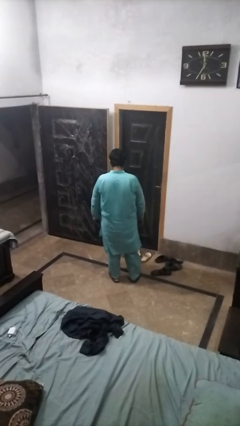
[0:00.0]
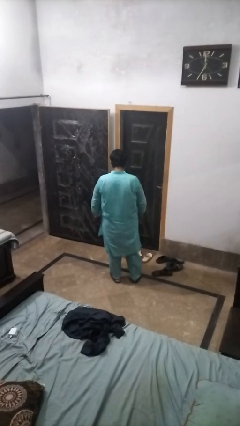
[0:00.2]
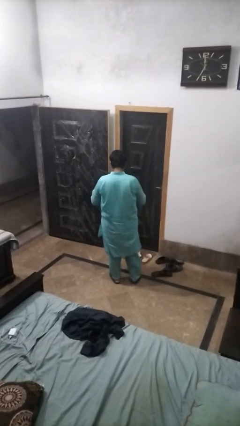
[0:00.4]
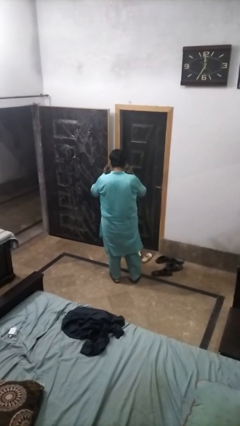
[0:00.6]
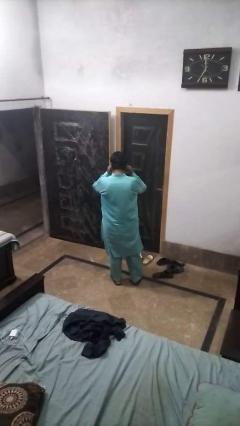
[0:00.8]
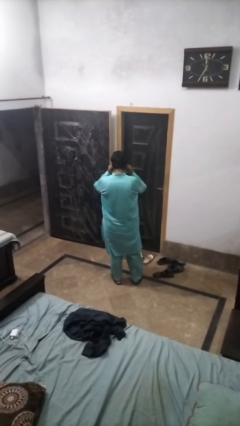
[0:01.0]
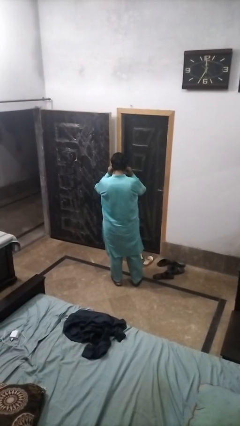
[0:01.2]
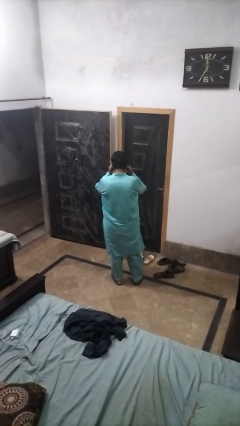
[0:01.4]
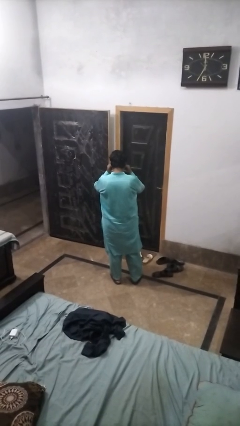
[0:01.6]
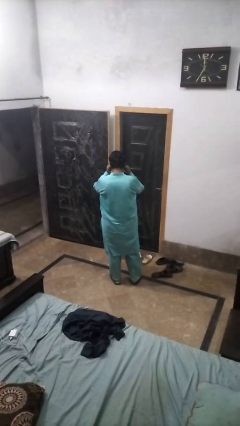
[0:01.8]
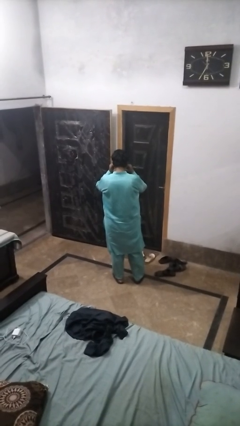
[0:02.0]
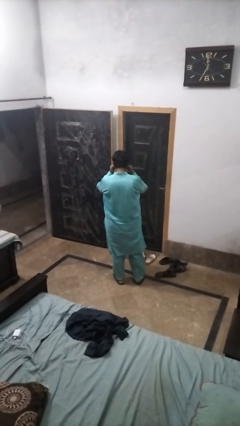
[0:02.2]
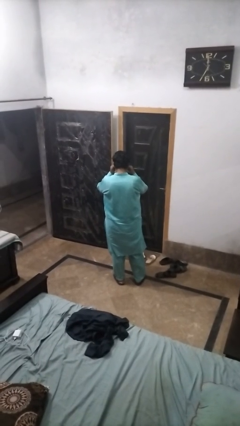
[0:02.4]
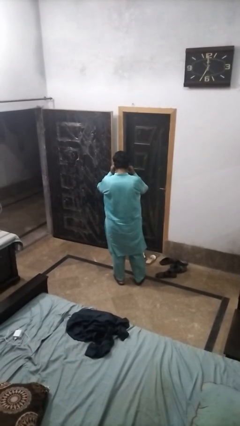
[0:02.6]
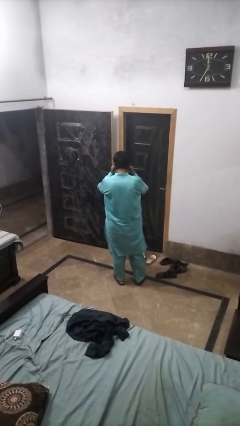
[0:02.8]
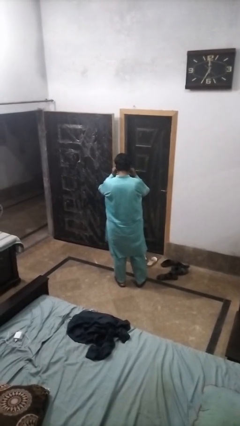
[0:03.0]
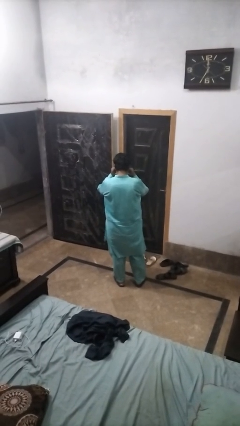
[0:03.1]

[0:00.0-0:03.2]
person puts fingers in ear

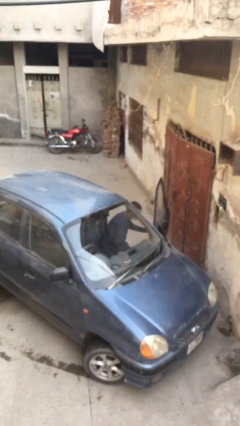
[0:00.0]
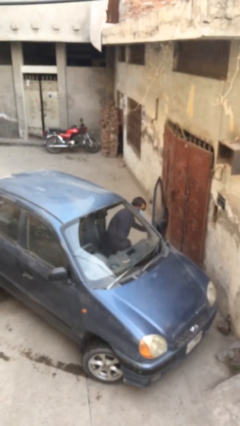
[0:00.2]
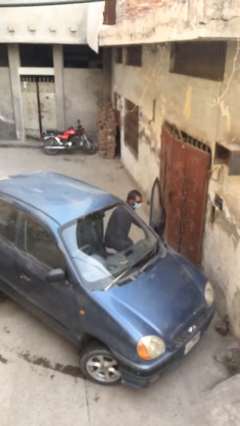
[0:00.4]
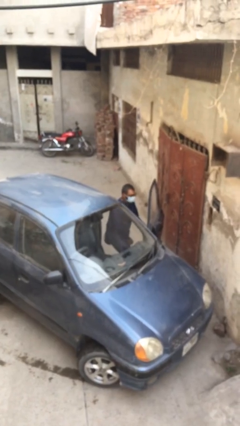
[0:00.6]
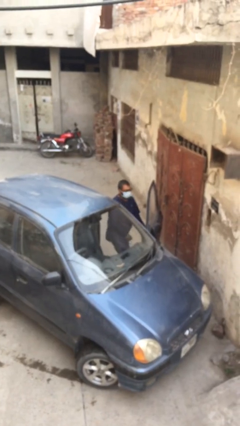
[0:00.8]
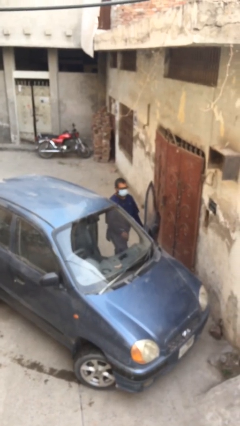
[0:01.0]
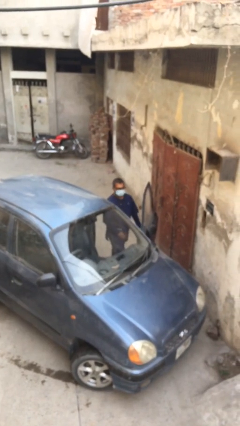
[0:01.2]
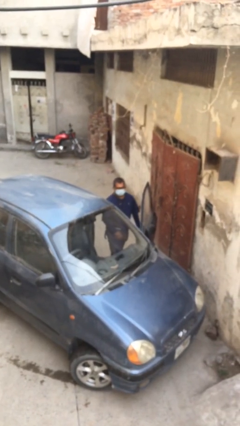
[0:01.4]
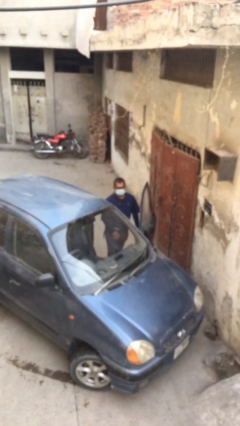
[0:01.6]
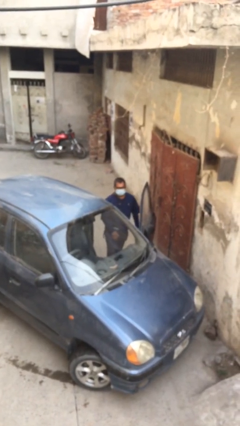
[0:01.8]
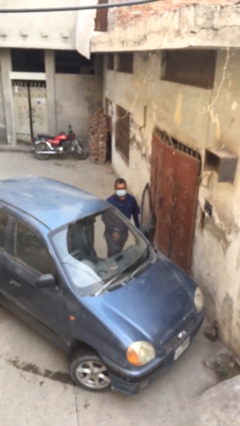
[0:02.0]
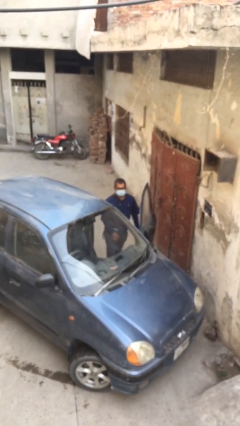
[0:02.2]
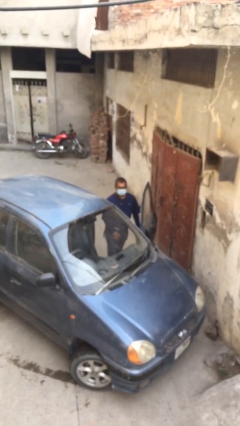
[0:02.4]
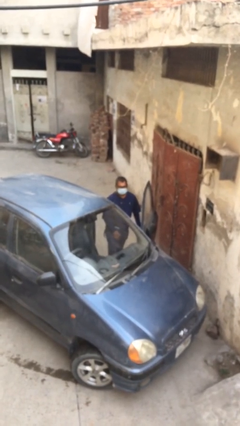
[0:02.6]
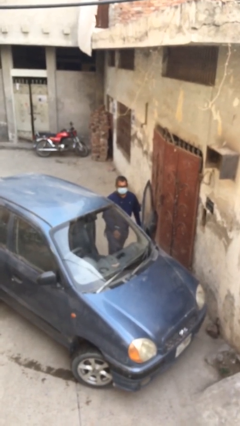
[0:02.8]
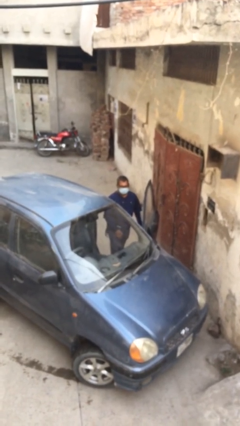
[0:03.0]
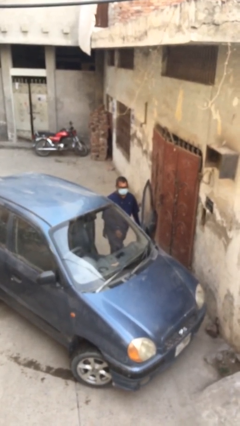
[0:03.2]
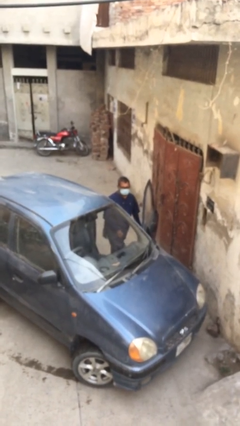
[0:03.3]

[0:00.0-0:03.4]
person exits car

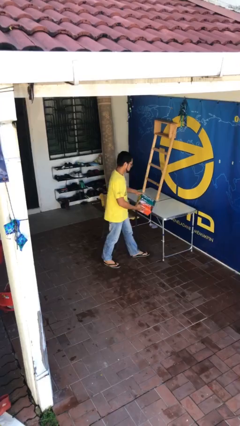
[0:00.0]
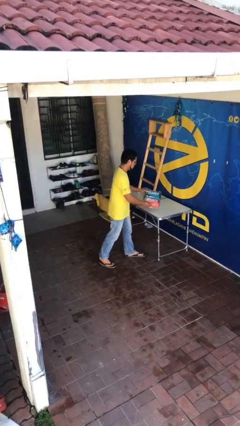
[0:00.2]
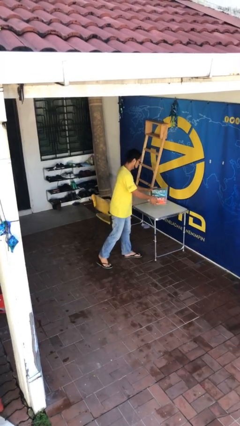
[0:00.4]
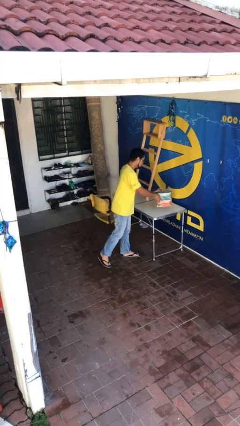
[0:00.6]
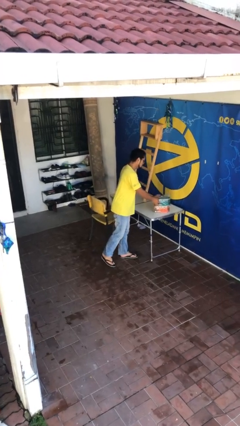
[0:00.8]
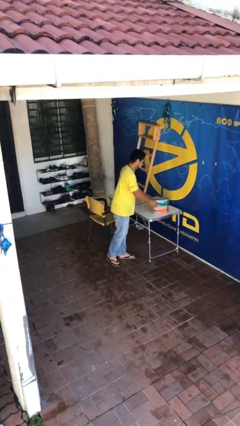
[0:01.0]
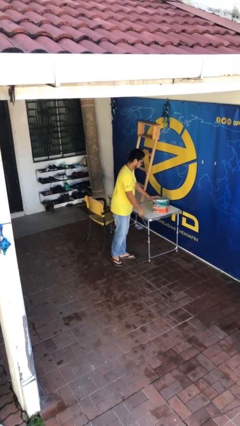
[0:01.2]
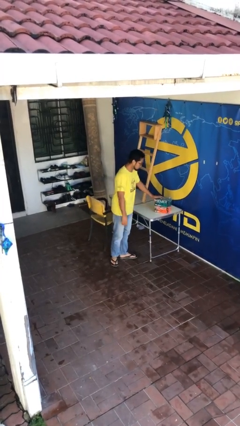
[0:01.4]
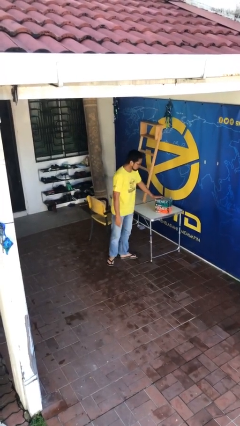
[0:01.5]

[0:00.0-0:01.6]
person puts down object on table

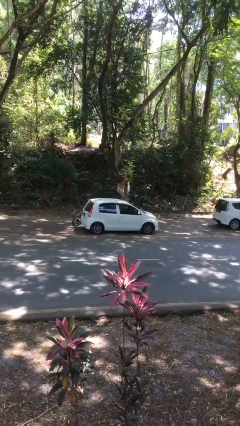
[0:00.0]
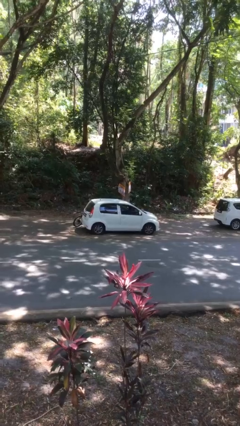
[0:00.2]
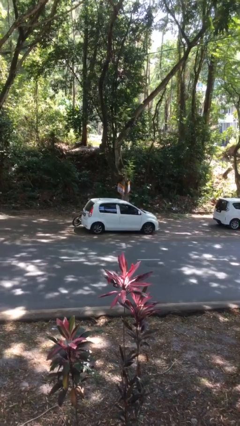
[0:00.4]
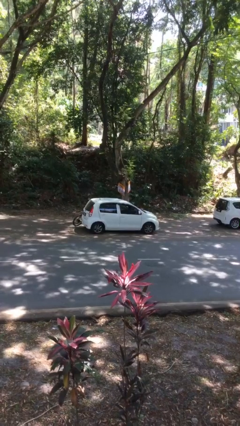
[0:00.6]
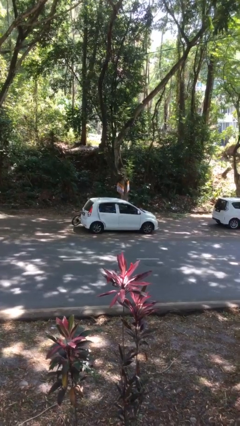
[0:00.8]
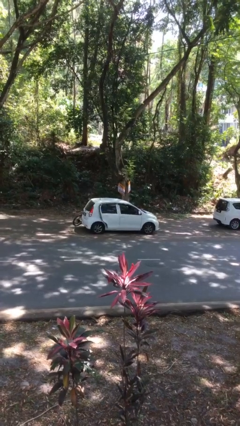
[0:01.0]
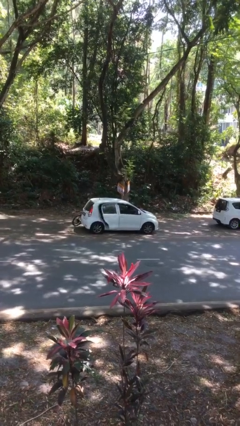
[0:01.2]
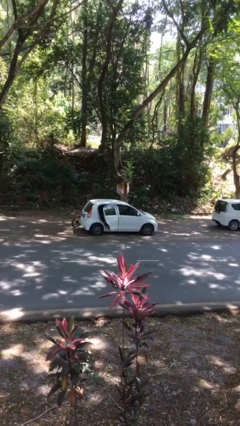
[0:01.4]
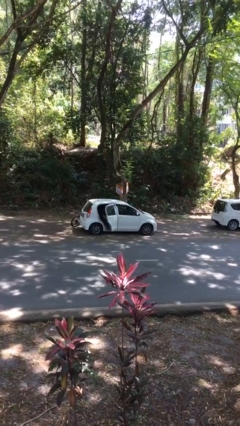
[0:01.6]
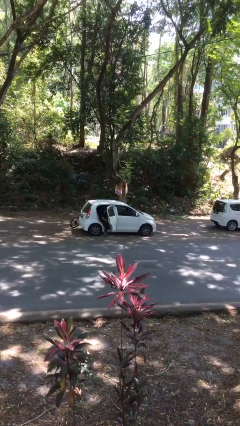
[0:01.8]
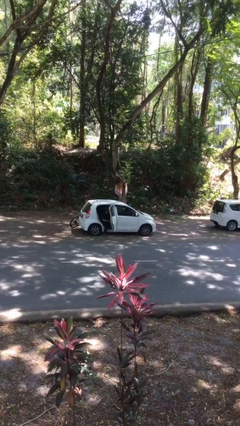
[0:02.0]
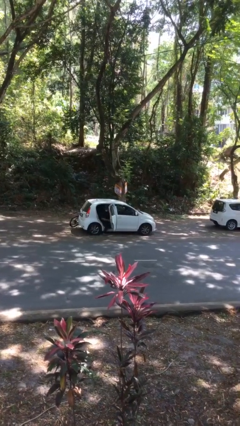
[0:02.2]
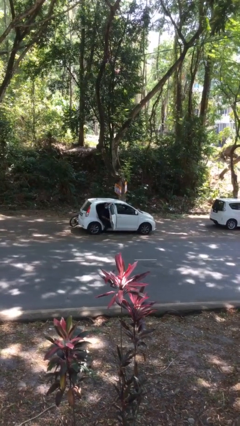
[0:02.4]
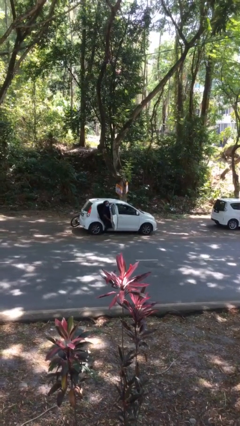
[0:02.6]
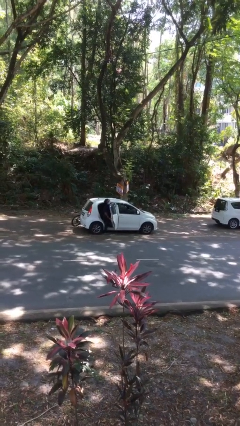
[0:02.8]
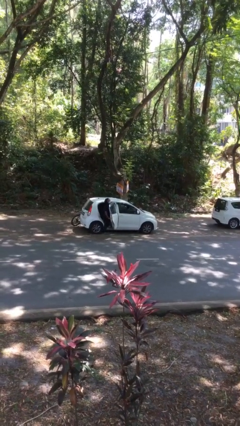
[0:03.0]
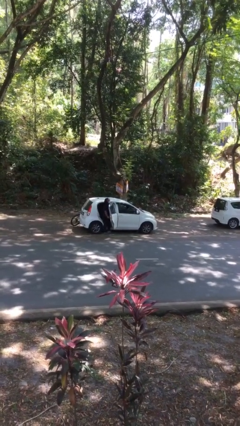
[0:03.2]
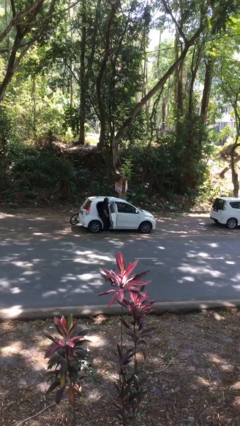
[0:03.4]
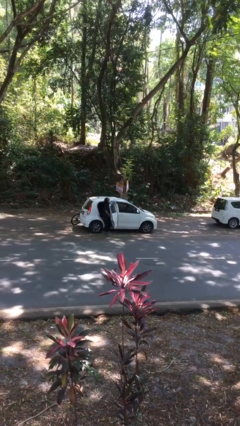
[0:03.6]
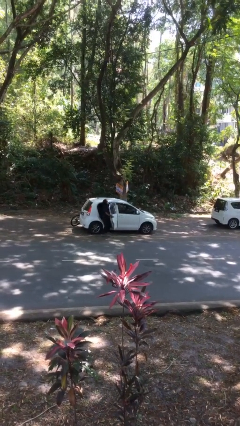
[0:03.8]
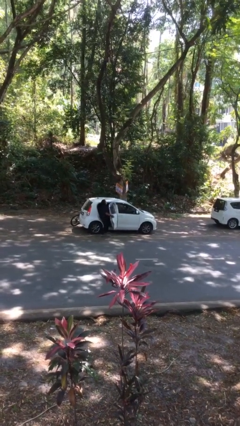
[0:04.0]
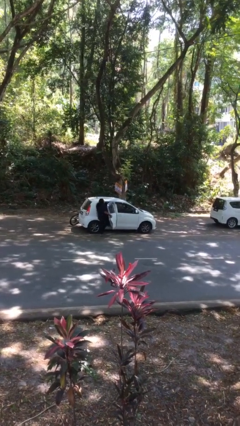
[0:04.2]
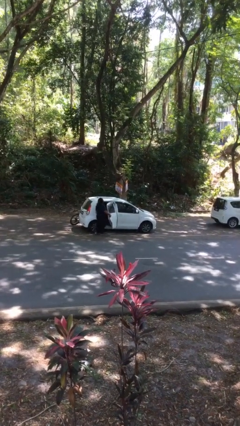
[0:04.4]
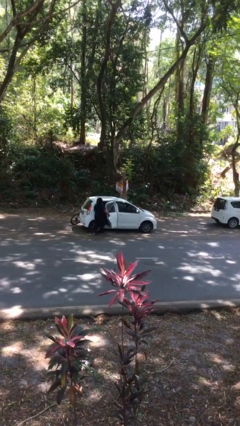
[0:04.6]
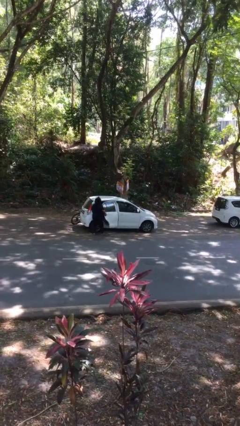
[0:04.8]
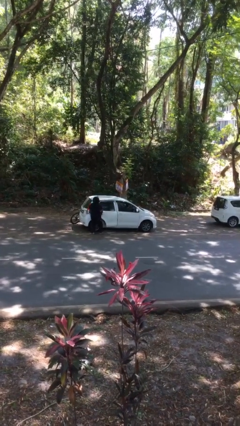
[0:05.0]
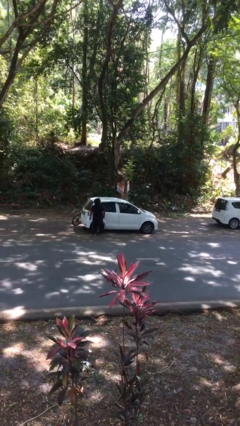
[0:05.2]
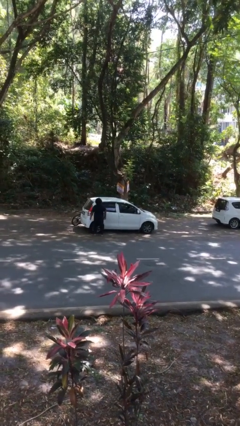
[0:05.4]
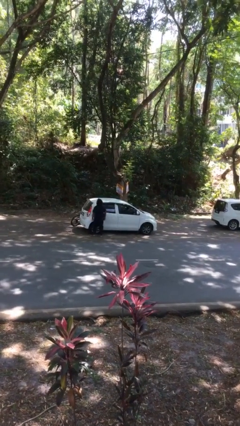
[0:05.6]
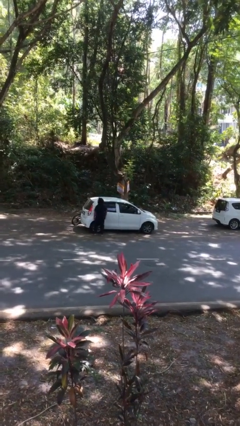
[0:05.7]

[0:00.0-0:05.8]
car drops off person

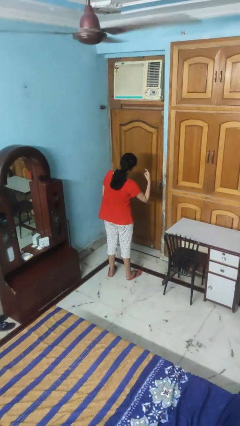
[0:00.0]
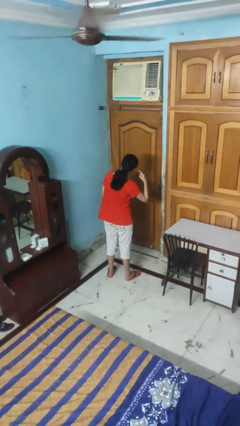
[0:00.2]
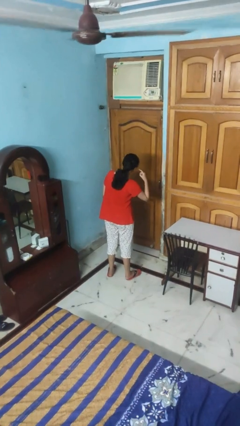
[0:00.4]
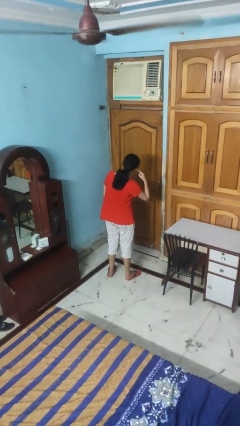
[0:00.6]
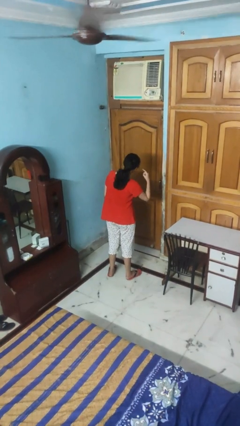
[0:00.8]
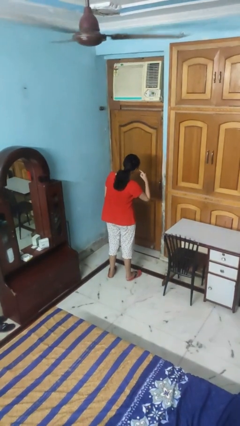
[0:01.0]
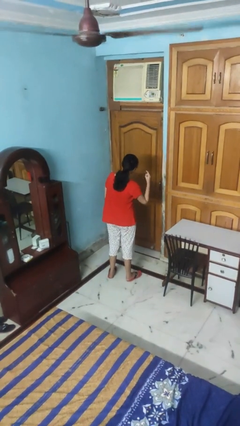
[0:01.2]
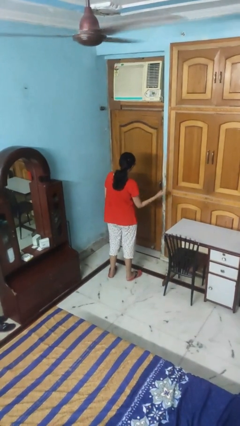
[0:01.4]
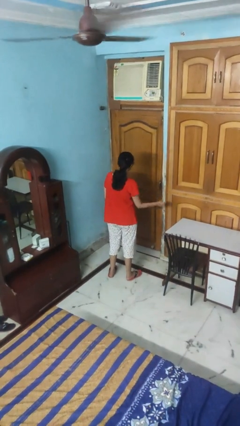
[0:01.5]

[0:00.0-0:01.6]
person gestures listen closely

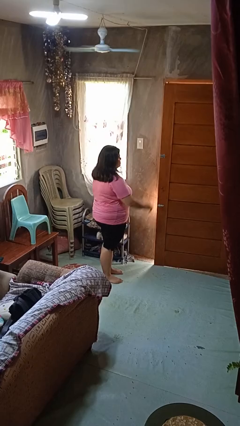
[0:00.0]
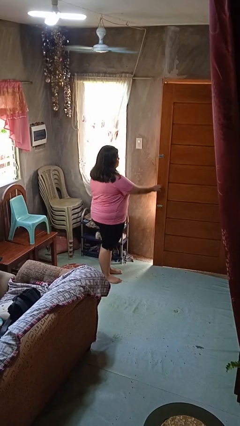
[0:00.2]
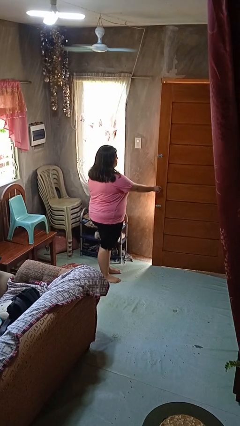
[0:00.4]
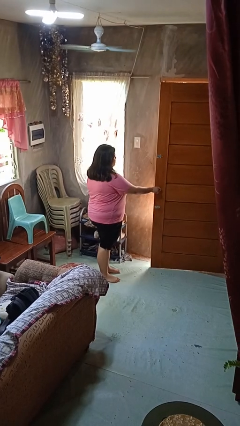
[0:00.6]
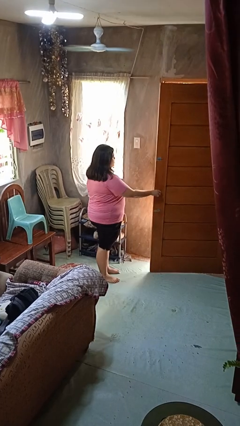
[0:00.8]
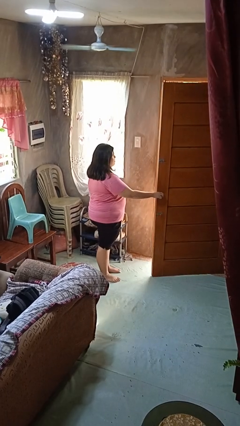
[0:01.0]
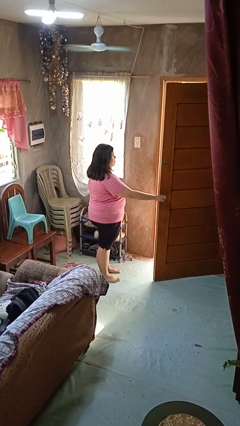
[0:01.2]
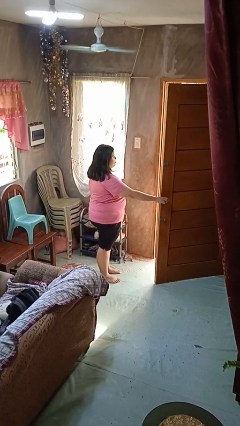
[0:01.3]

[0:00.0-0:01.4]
person opens facility door

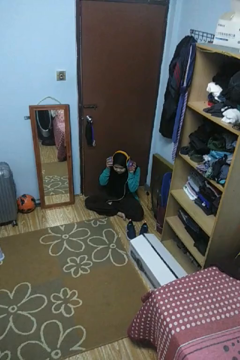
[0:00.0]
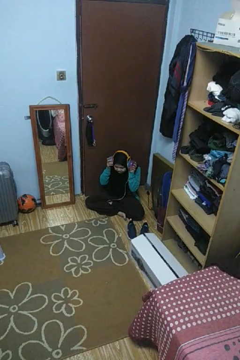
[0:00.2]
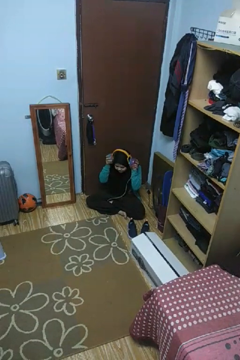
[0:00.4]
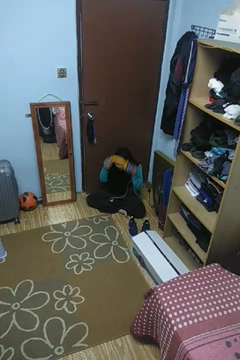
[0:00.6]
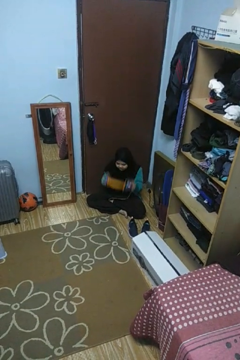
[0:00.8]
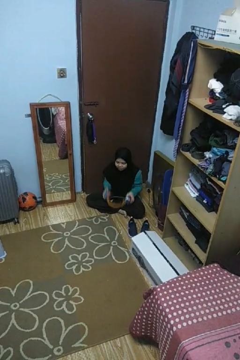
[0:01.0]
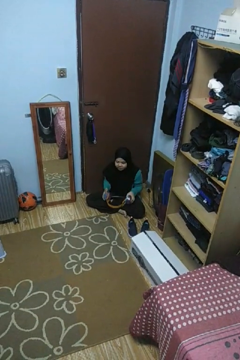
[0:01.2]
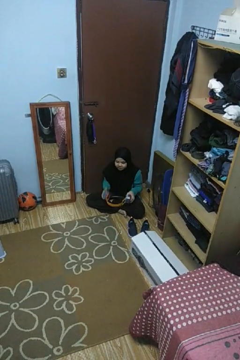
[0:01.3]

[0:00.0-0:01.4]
person takes off headphones
